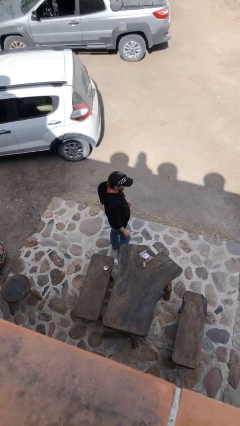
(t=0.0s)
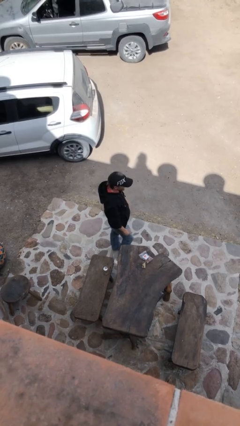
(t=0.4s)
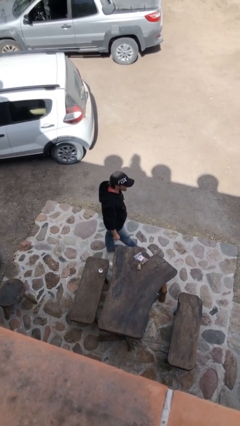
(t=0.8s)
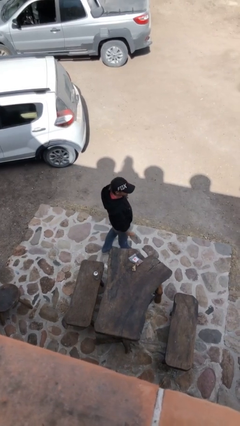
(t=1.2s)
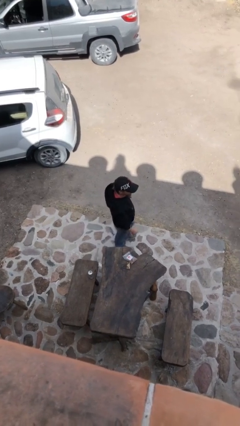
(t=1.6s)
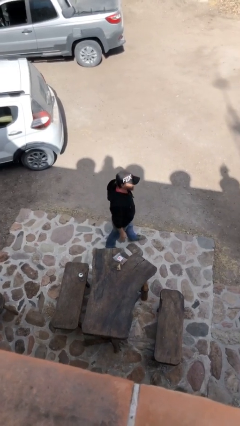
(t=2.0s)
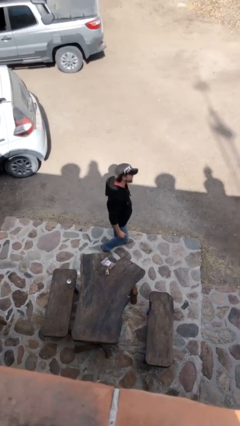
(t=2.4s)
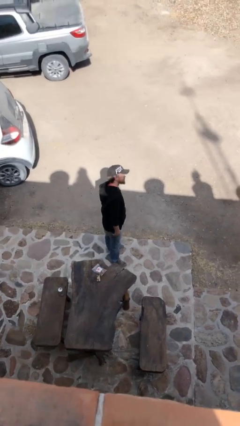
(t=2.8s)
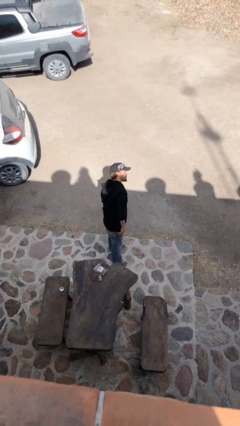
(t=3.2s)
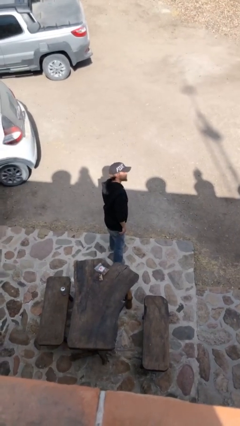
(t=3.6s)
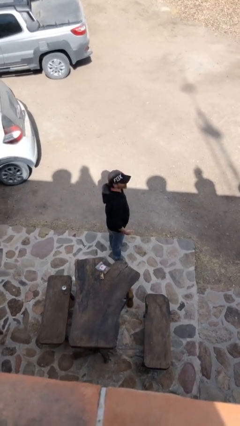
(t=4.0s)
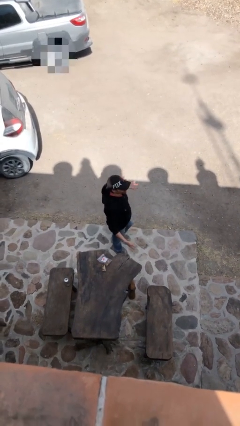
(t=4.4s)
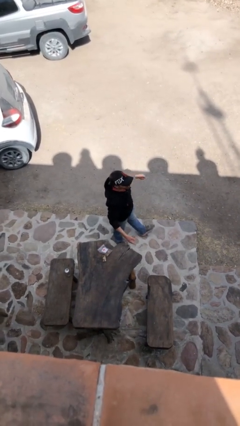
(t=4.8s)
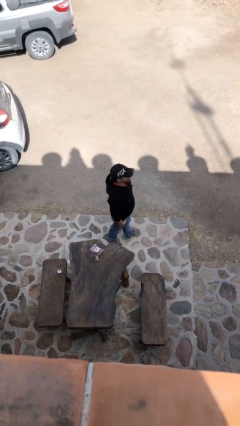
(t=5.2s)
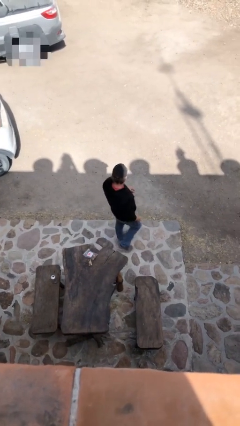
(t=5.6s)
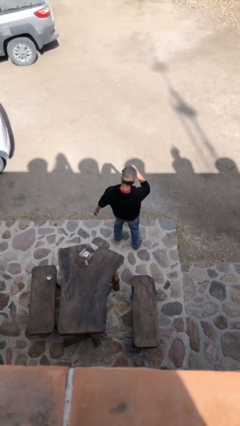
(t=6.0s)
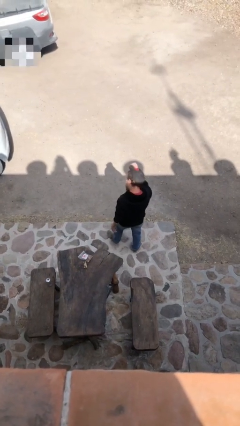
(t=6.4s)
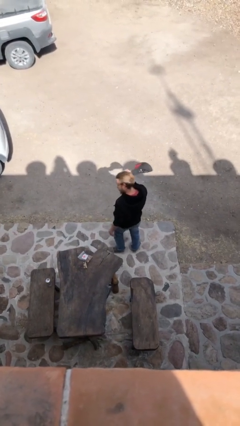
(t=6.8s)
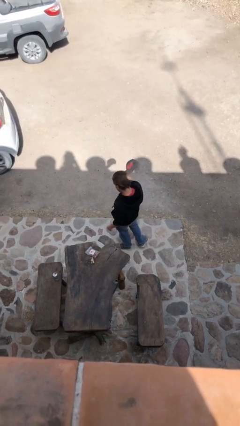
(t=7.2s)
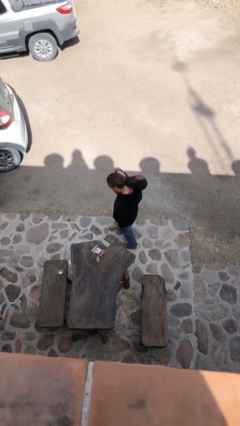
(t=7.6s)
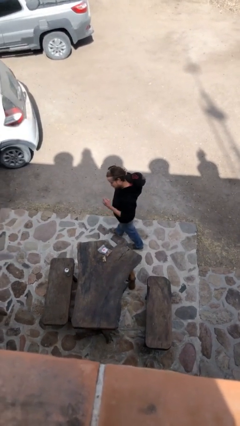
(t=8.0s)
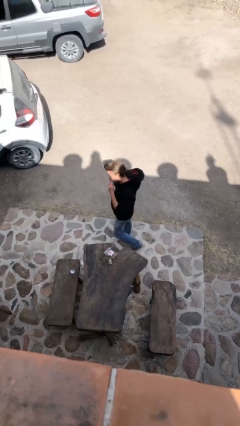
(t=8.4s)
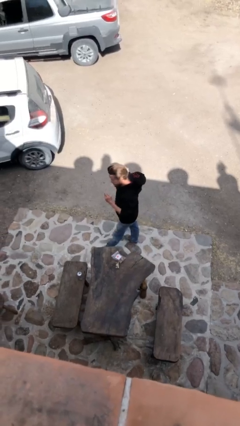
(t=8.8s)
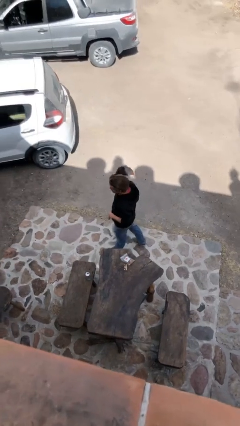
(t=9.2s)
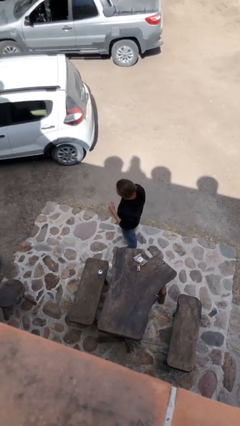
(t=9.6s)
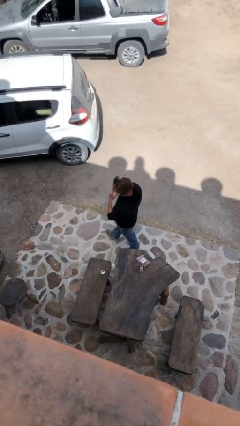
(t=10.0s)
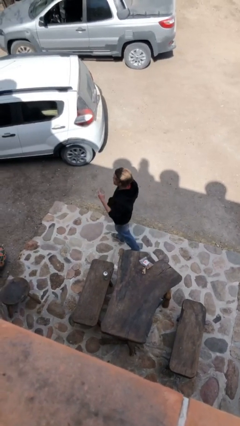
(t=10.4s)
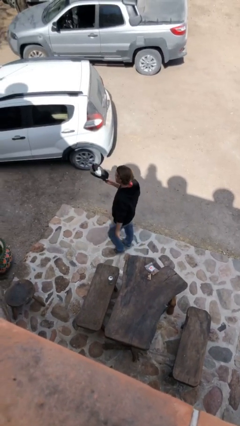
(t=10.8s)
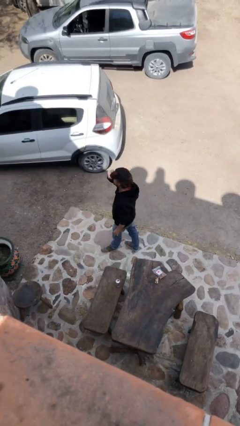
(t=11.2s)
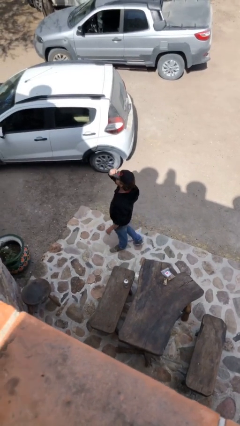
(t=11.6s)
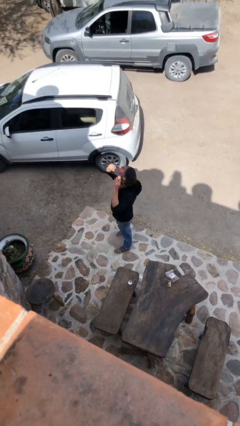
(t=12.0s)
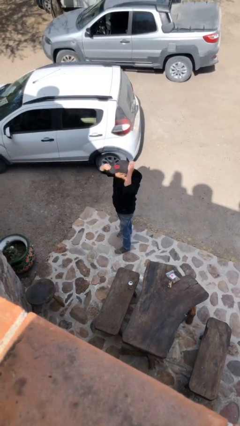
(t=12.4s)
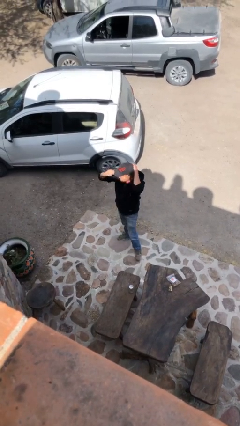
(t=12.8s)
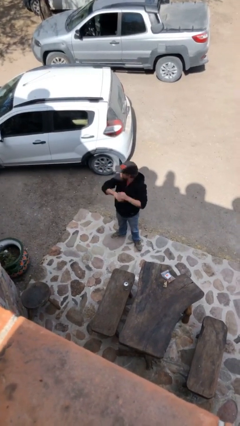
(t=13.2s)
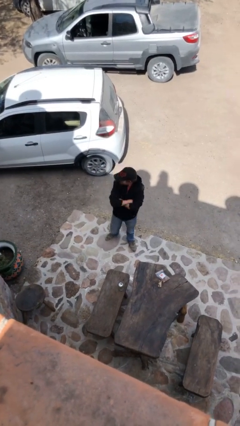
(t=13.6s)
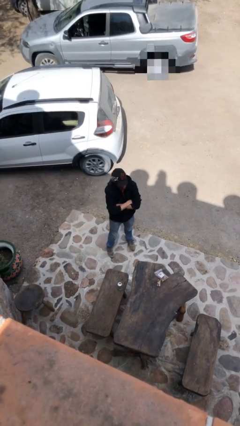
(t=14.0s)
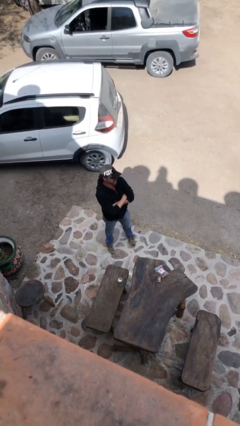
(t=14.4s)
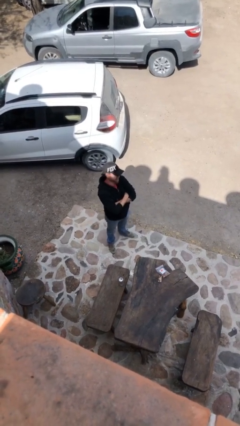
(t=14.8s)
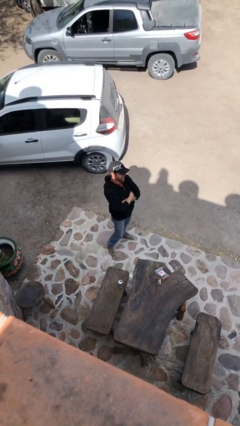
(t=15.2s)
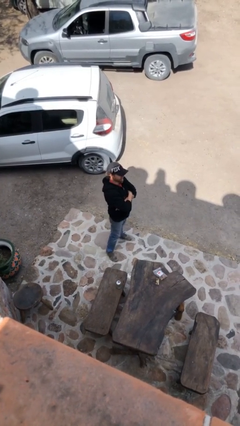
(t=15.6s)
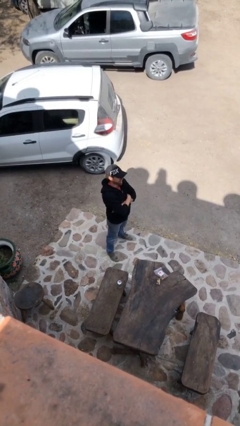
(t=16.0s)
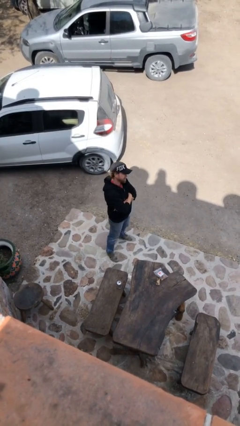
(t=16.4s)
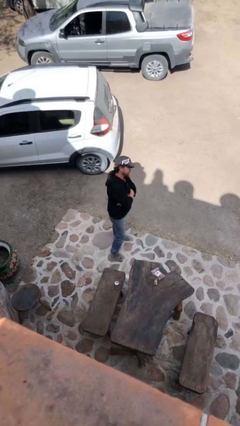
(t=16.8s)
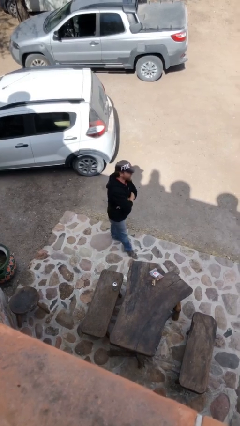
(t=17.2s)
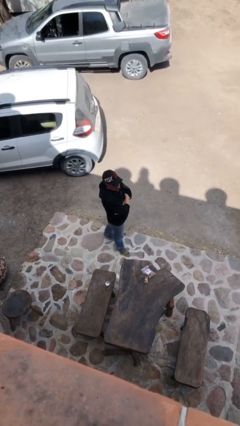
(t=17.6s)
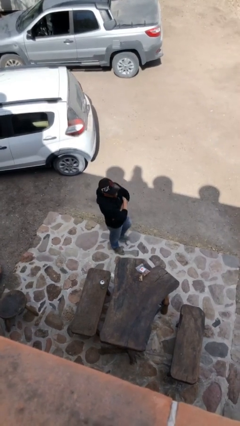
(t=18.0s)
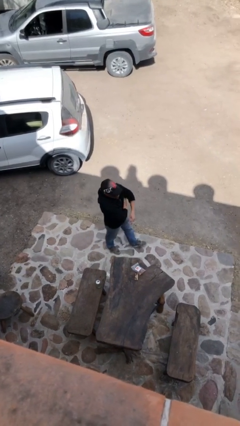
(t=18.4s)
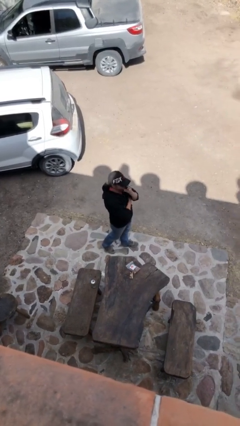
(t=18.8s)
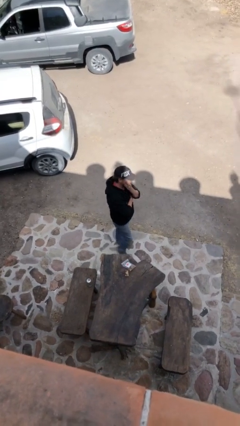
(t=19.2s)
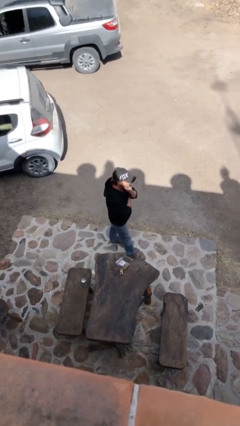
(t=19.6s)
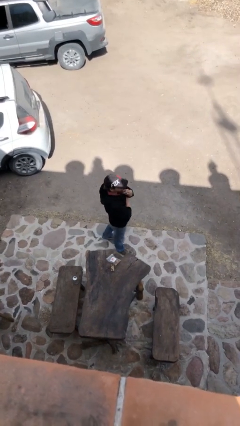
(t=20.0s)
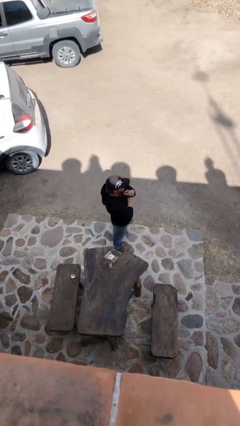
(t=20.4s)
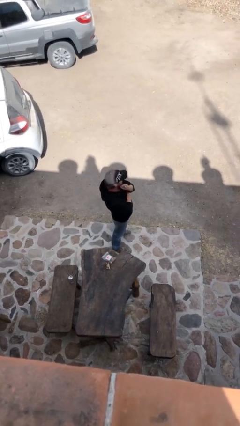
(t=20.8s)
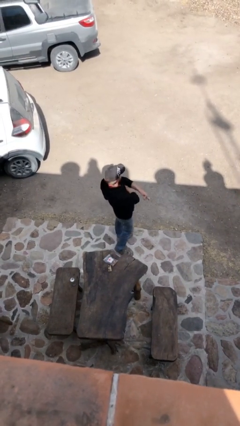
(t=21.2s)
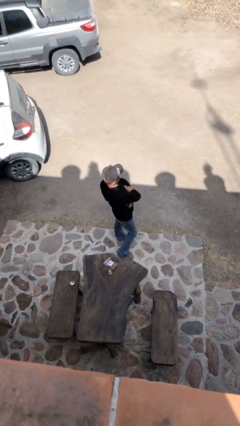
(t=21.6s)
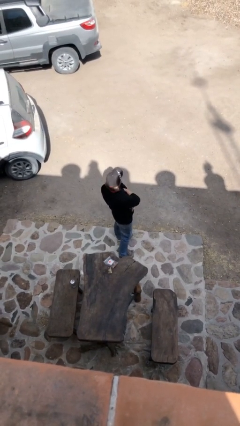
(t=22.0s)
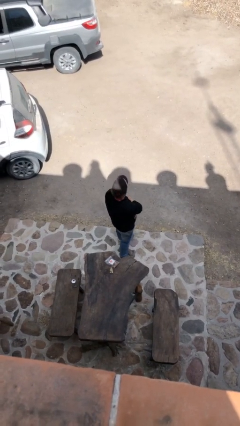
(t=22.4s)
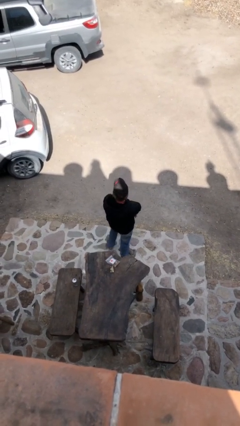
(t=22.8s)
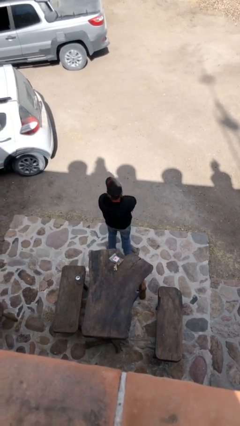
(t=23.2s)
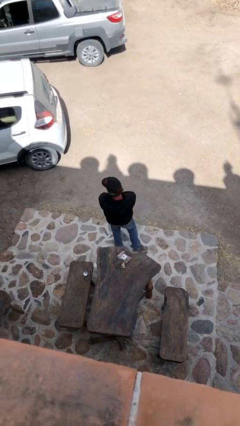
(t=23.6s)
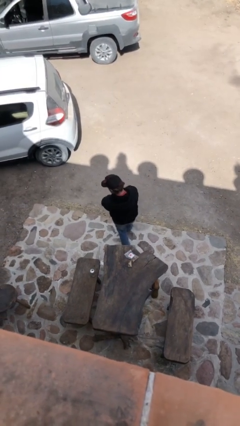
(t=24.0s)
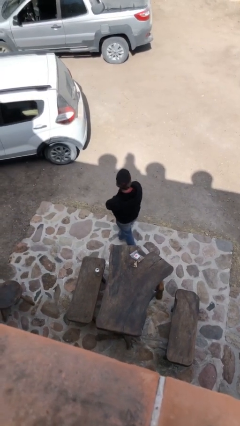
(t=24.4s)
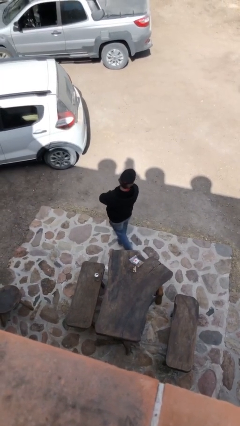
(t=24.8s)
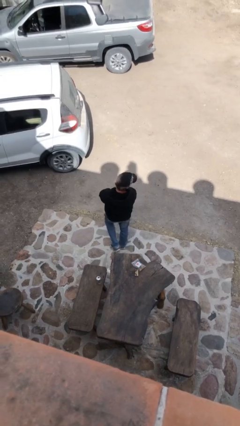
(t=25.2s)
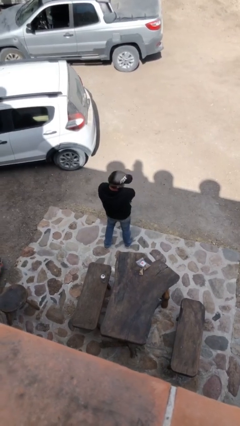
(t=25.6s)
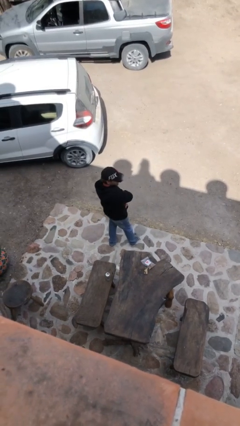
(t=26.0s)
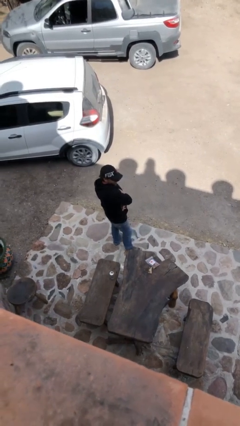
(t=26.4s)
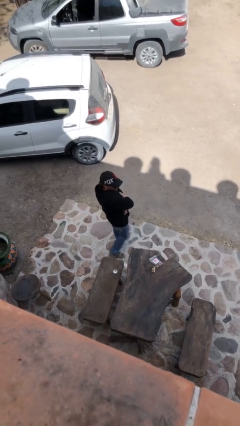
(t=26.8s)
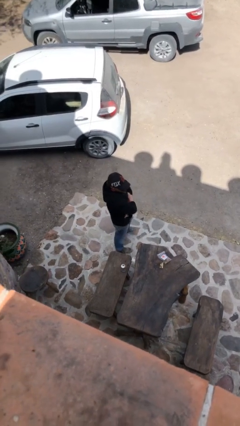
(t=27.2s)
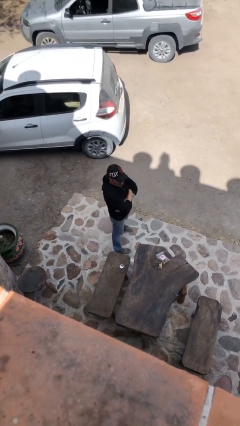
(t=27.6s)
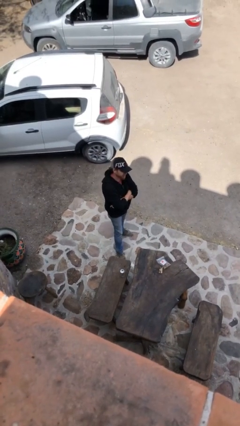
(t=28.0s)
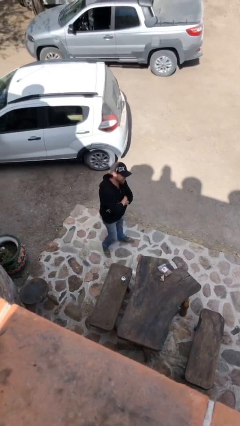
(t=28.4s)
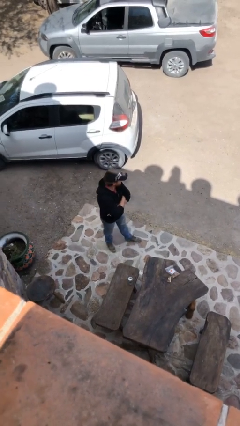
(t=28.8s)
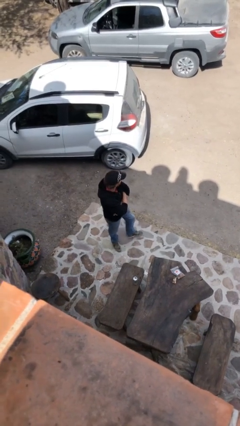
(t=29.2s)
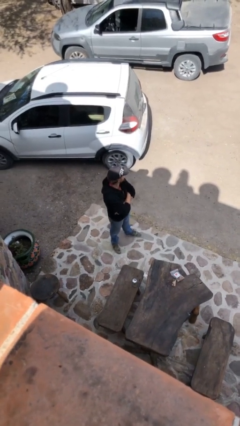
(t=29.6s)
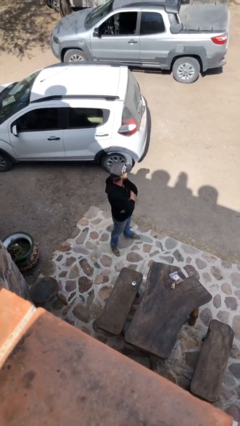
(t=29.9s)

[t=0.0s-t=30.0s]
person walks

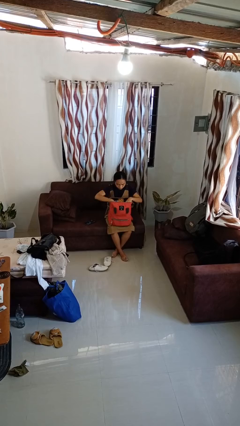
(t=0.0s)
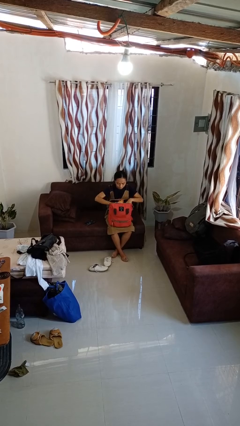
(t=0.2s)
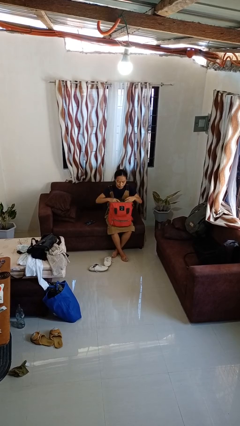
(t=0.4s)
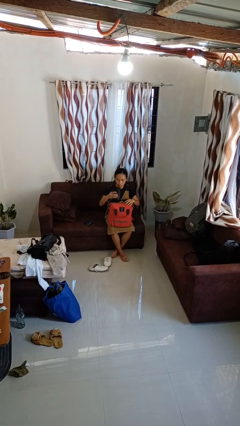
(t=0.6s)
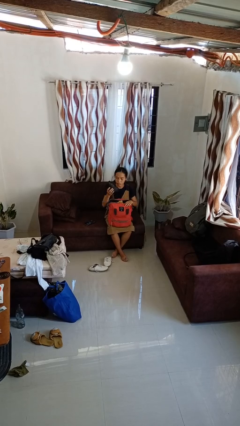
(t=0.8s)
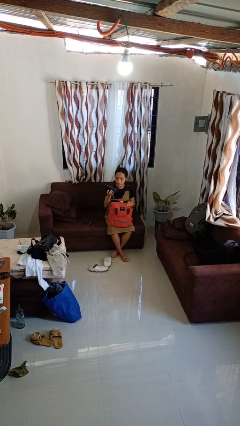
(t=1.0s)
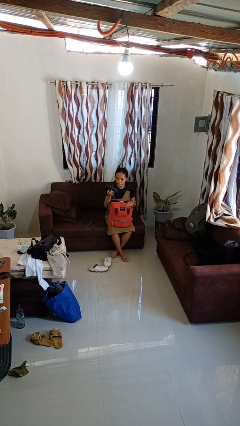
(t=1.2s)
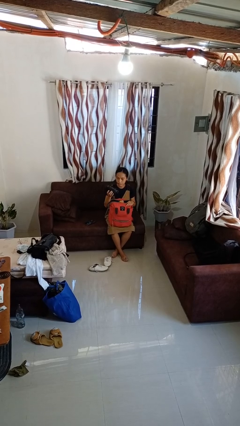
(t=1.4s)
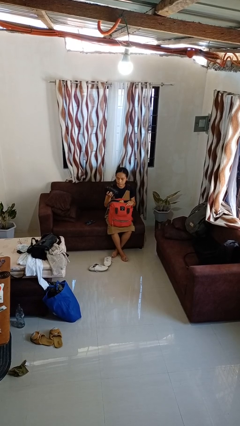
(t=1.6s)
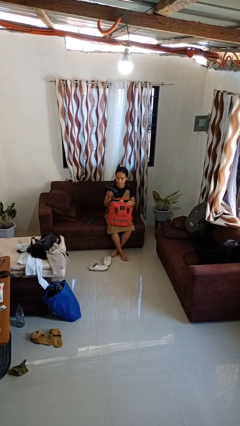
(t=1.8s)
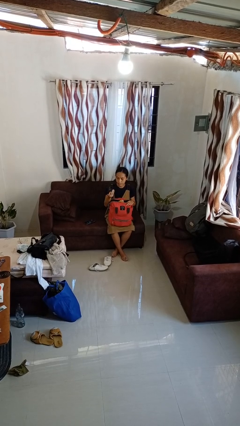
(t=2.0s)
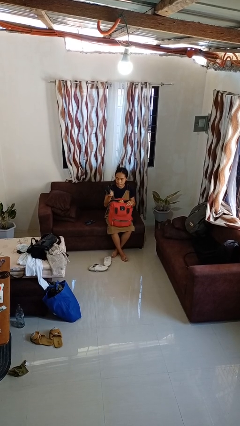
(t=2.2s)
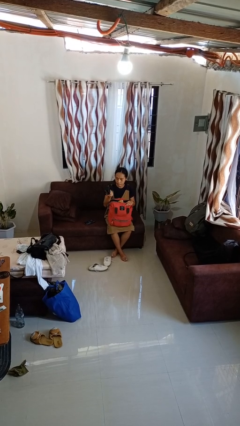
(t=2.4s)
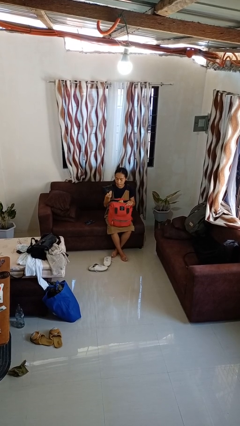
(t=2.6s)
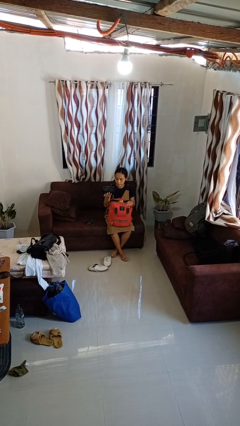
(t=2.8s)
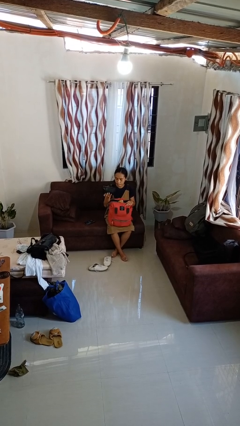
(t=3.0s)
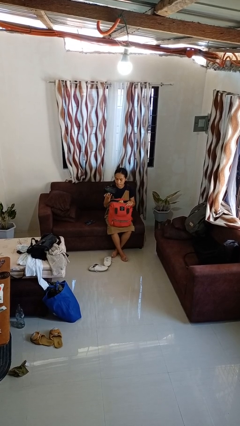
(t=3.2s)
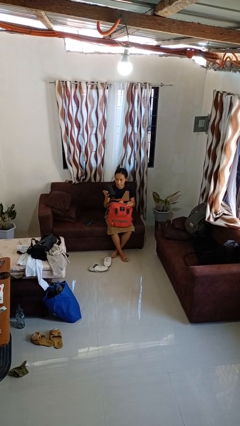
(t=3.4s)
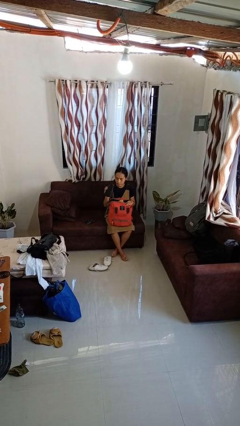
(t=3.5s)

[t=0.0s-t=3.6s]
person takes object from backpack
